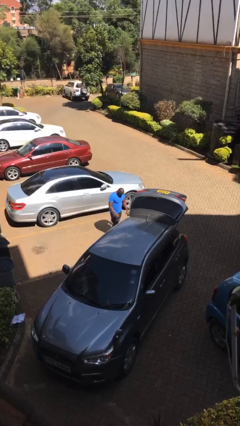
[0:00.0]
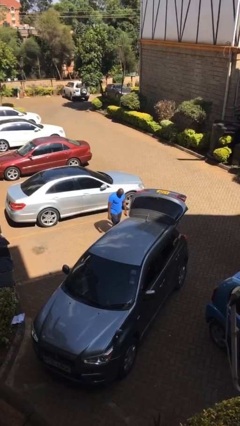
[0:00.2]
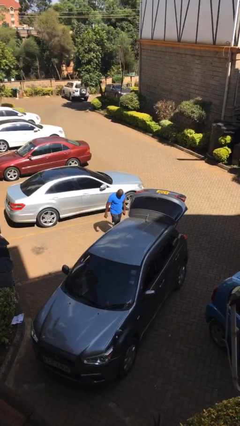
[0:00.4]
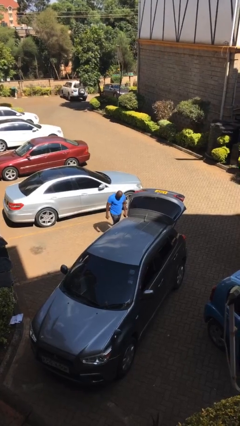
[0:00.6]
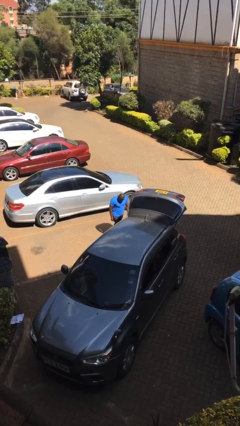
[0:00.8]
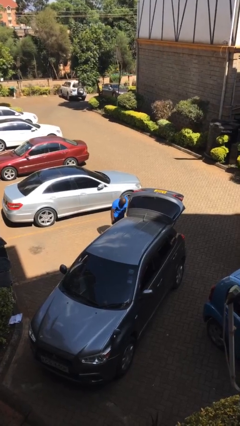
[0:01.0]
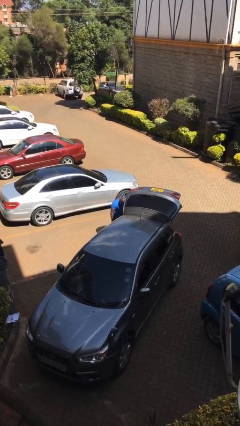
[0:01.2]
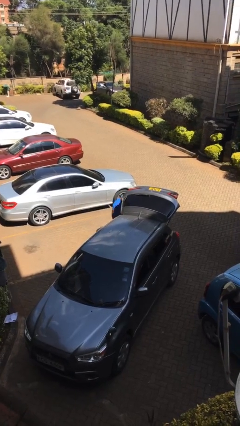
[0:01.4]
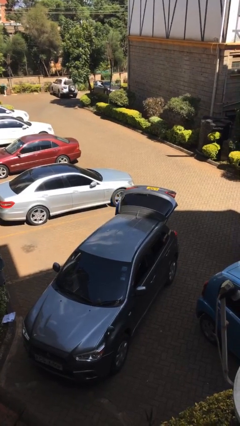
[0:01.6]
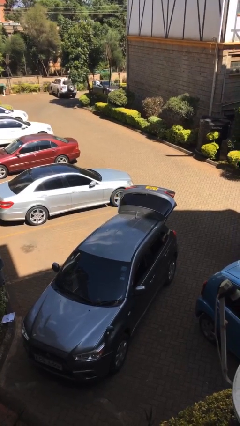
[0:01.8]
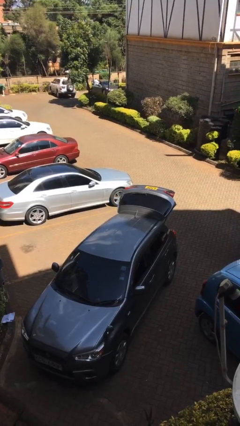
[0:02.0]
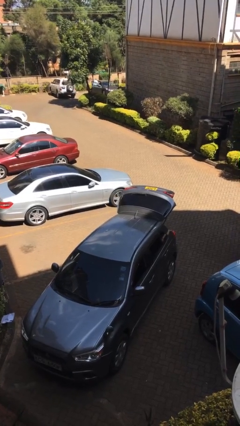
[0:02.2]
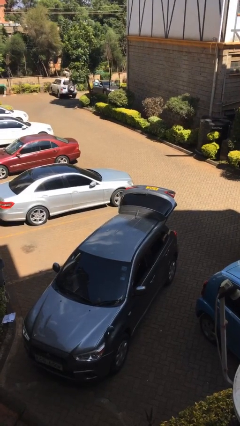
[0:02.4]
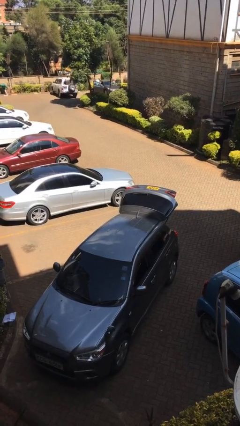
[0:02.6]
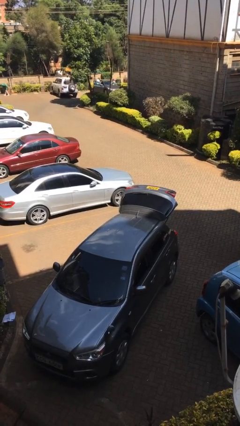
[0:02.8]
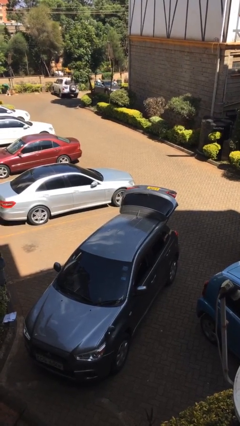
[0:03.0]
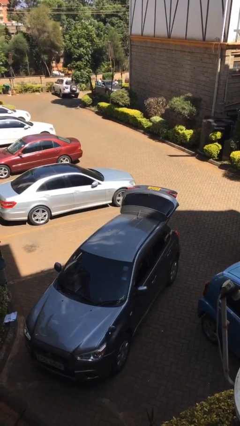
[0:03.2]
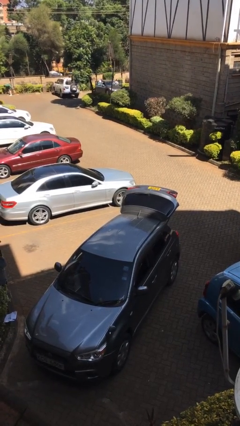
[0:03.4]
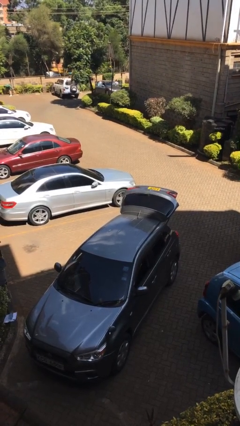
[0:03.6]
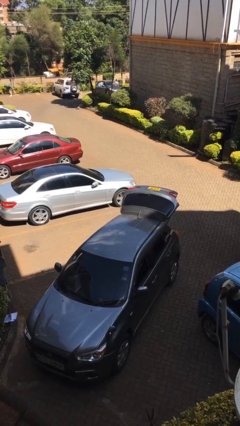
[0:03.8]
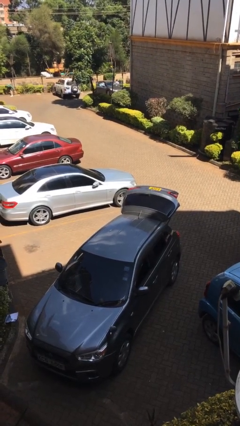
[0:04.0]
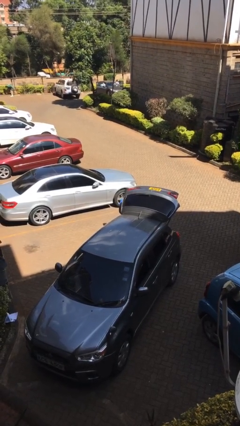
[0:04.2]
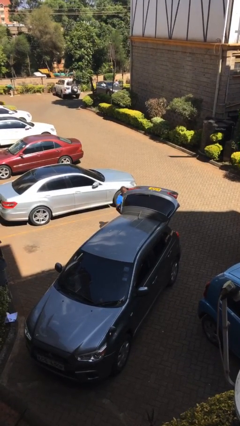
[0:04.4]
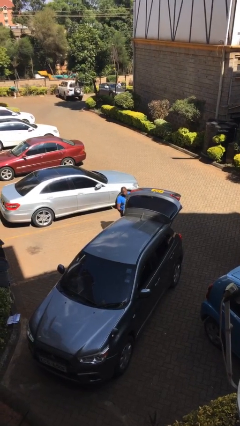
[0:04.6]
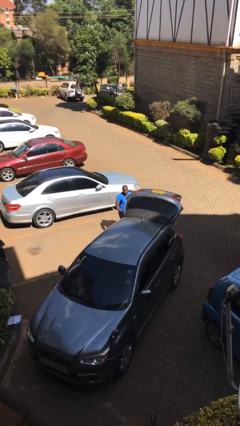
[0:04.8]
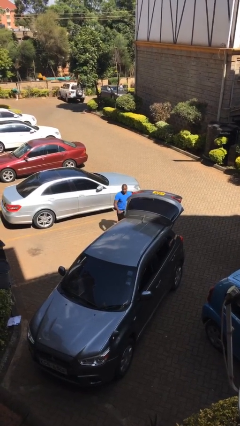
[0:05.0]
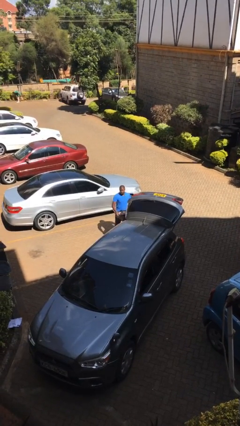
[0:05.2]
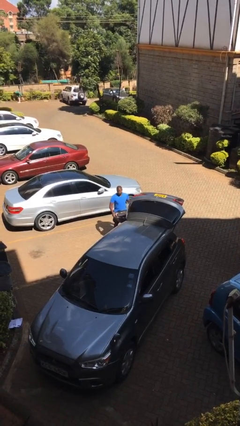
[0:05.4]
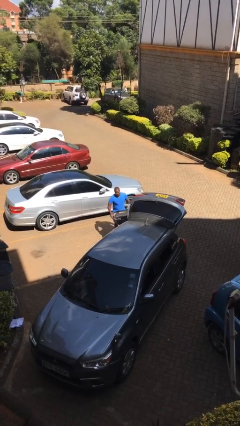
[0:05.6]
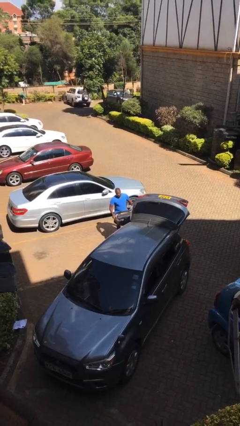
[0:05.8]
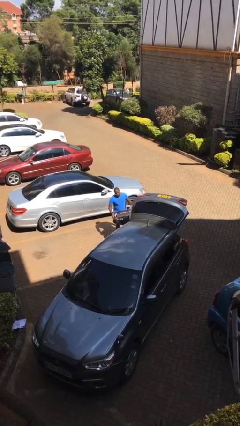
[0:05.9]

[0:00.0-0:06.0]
person unloads car

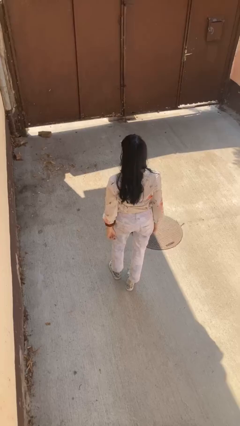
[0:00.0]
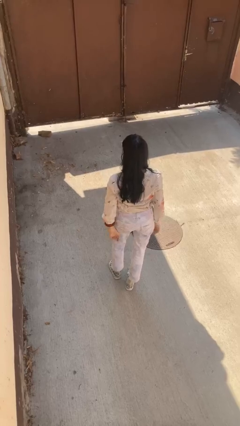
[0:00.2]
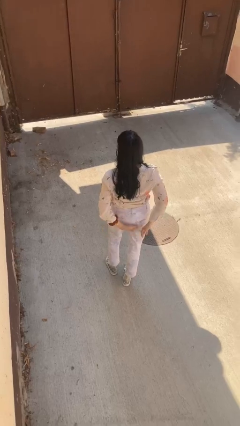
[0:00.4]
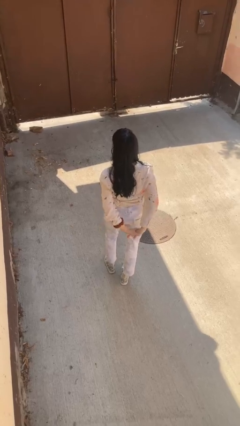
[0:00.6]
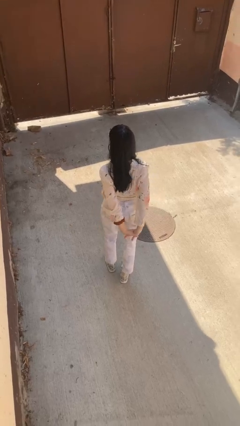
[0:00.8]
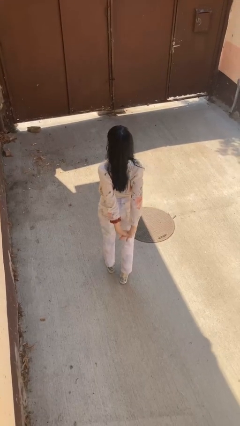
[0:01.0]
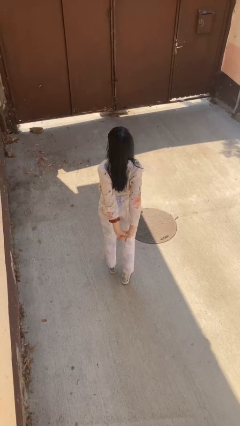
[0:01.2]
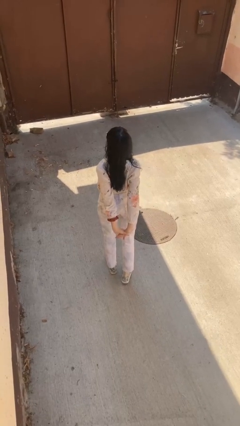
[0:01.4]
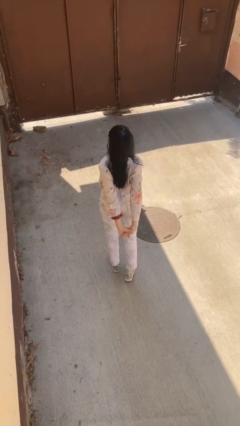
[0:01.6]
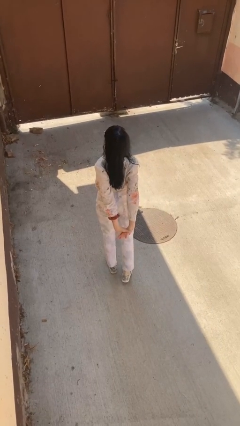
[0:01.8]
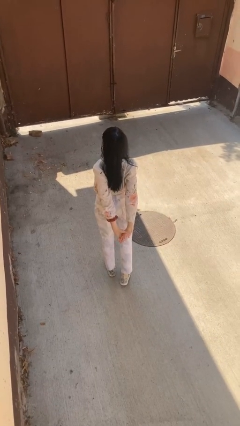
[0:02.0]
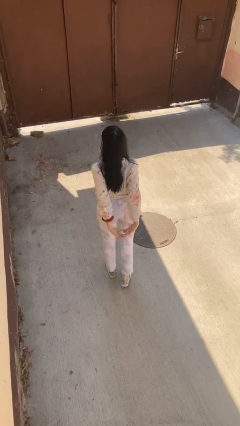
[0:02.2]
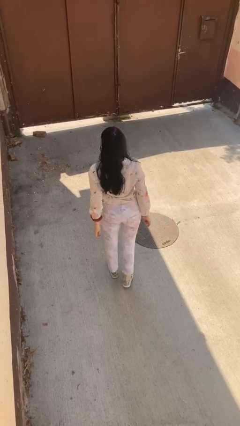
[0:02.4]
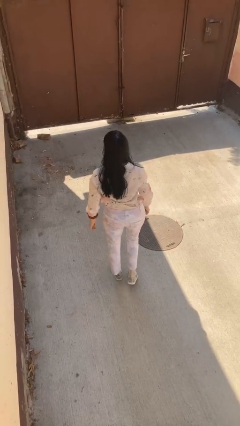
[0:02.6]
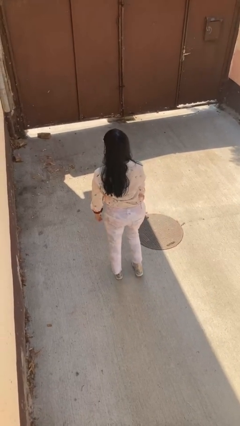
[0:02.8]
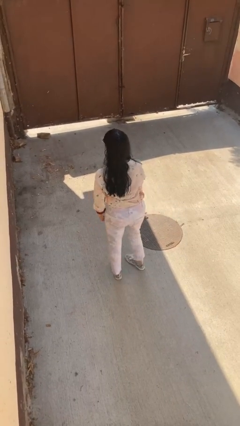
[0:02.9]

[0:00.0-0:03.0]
person stretches back

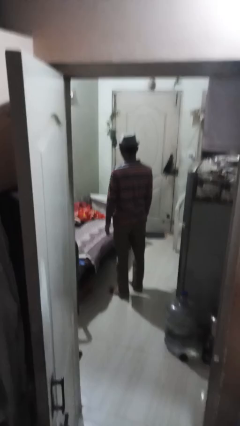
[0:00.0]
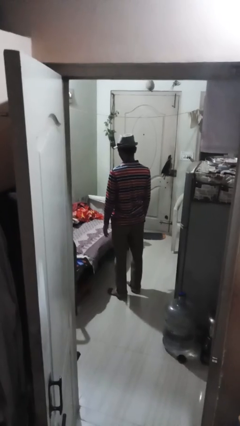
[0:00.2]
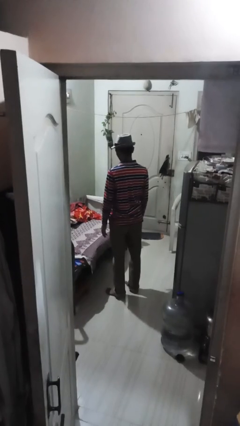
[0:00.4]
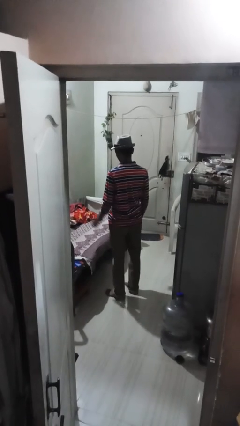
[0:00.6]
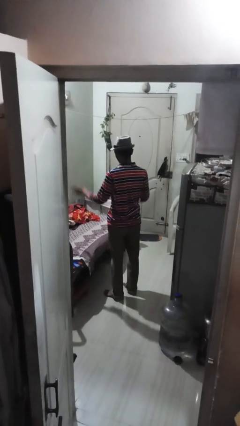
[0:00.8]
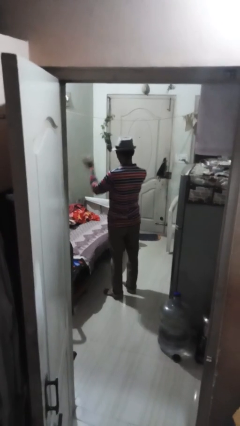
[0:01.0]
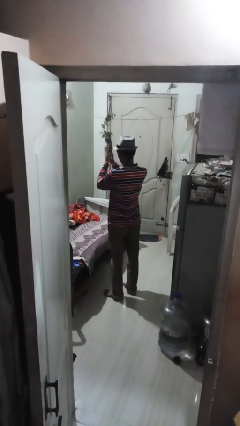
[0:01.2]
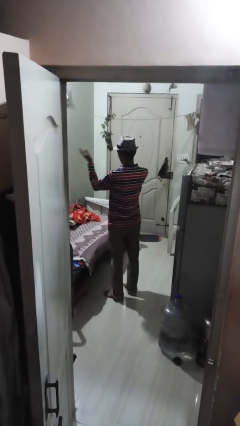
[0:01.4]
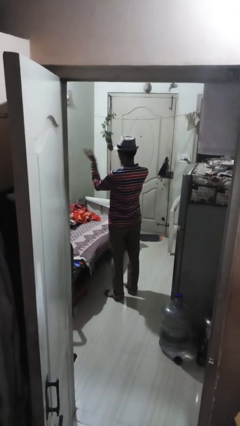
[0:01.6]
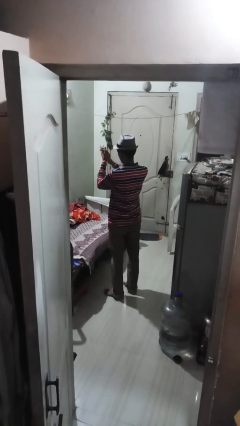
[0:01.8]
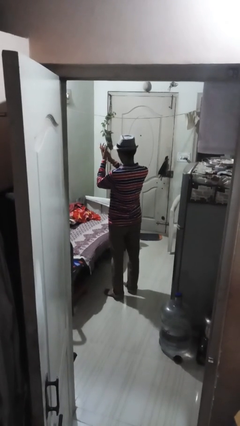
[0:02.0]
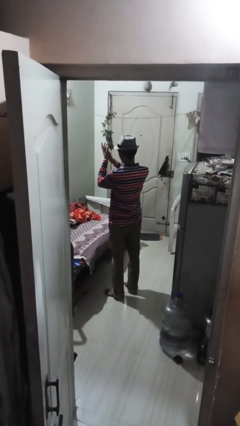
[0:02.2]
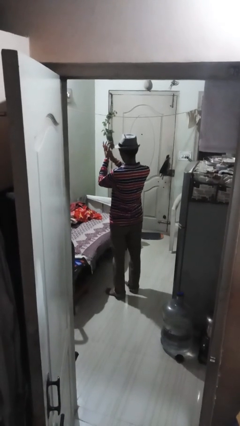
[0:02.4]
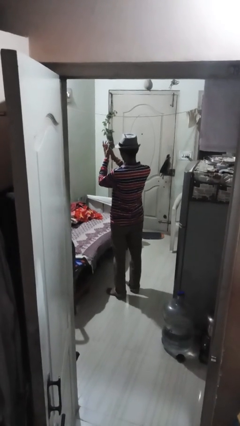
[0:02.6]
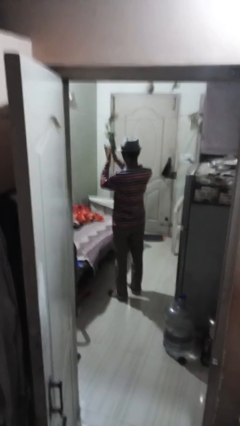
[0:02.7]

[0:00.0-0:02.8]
person claps hands

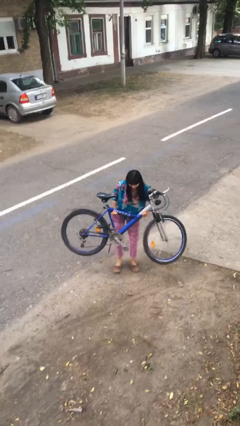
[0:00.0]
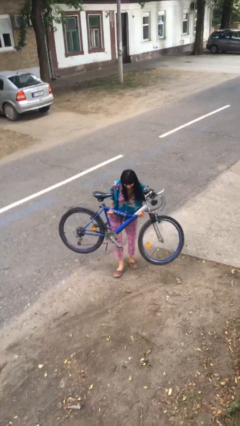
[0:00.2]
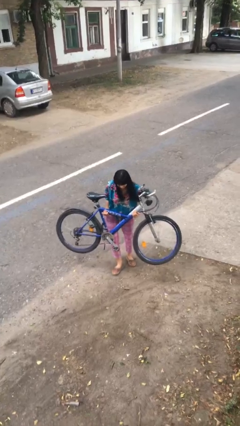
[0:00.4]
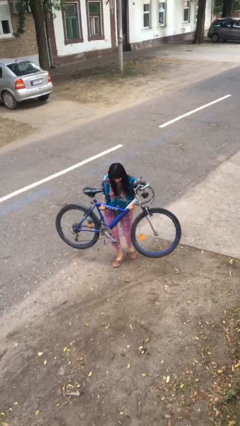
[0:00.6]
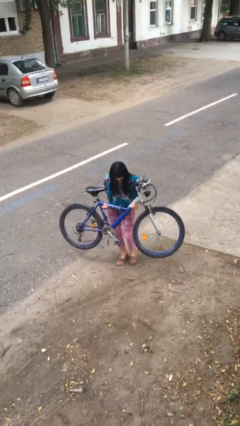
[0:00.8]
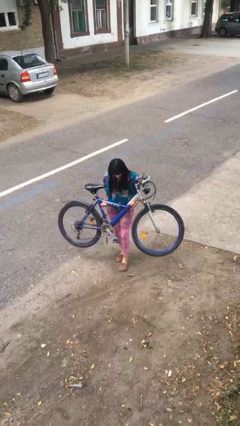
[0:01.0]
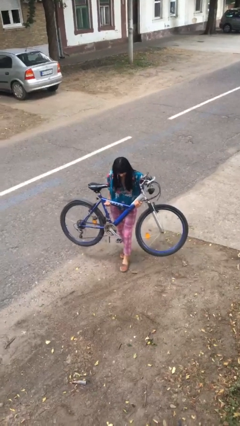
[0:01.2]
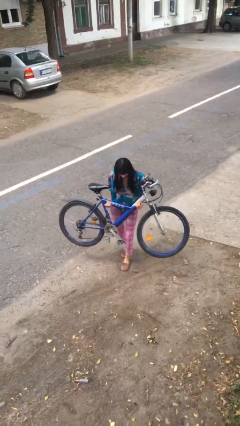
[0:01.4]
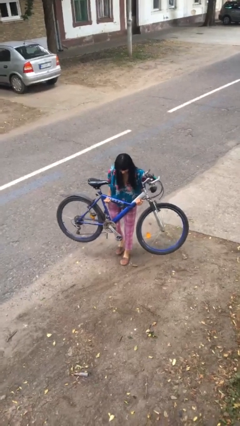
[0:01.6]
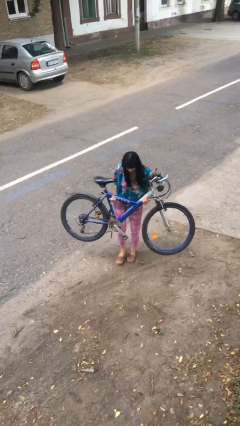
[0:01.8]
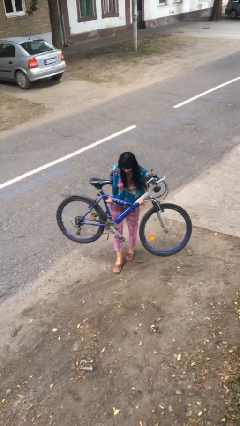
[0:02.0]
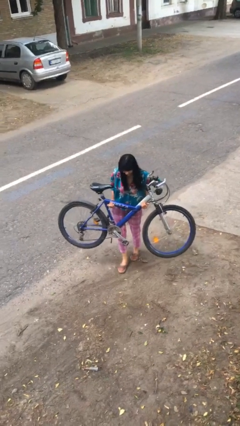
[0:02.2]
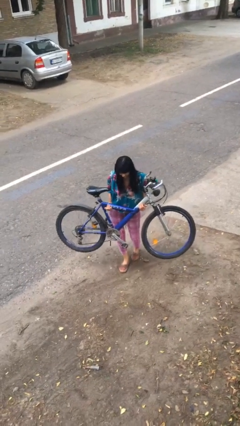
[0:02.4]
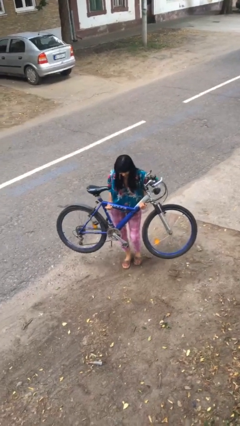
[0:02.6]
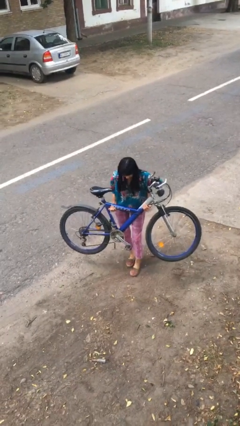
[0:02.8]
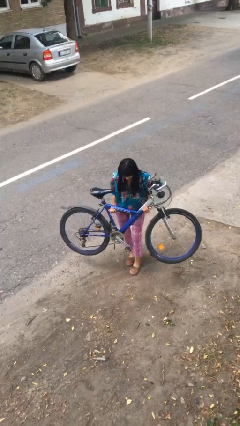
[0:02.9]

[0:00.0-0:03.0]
person carries heavy object

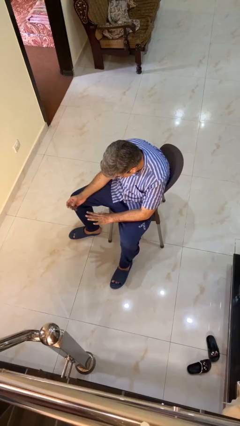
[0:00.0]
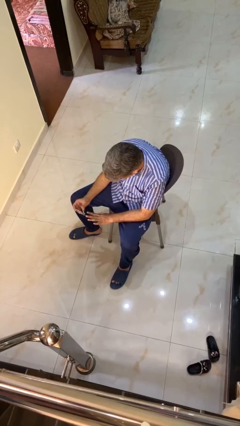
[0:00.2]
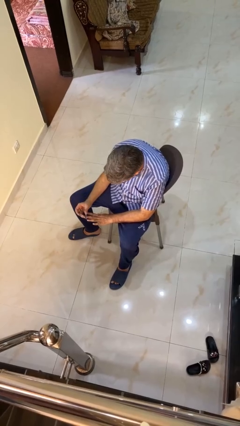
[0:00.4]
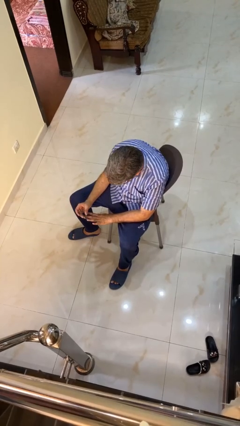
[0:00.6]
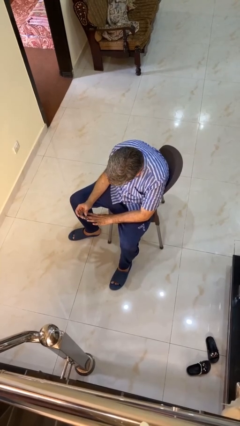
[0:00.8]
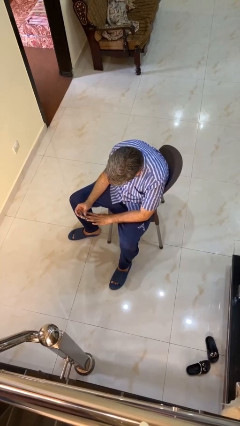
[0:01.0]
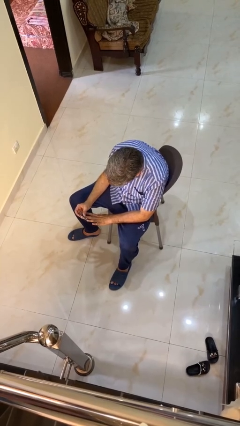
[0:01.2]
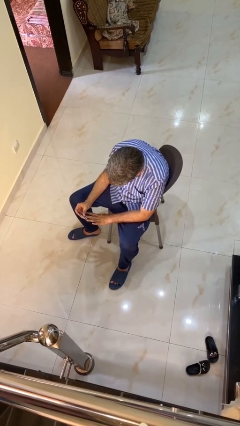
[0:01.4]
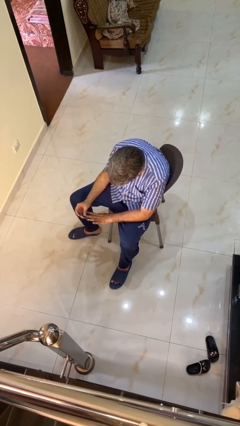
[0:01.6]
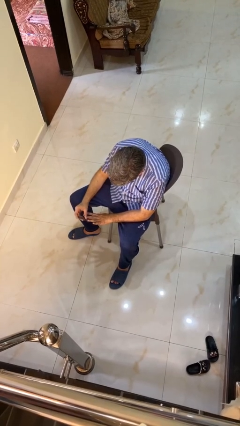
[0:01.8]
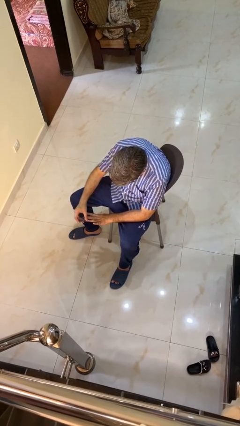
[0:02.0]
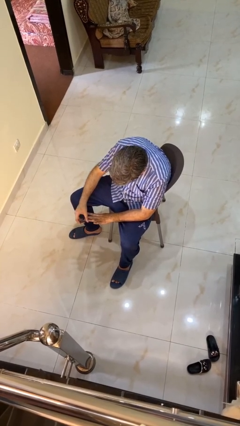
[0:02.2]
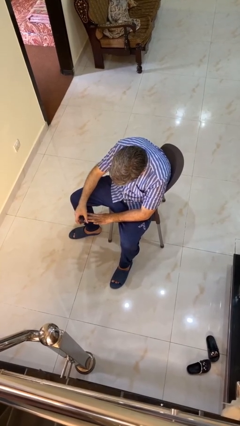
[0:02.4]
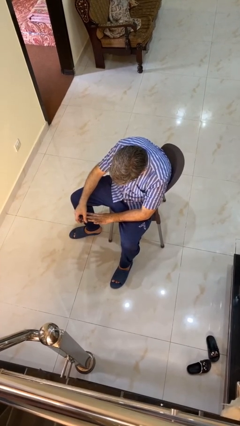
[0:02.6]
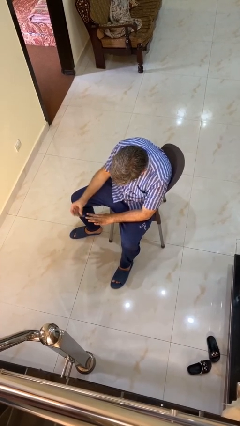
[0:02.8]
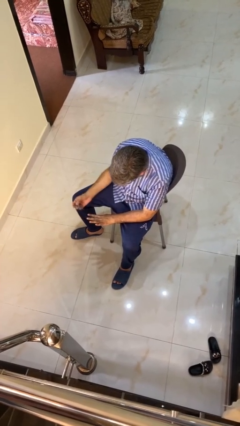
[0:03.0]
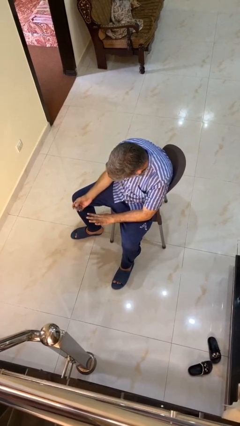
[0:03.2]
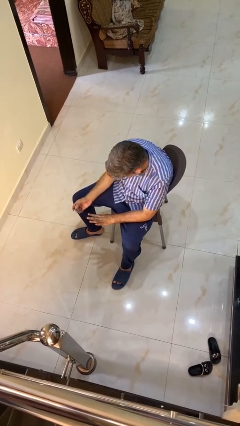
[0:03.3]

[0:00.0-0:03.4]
person clips fingernails
